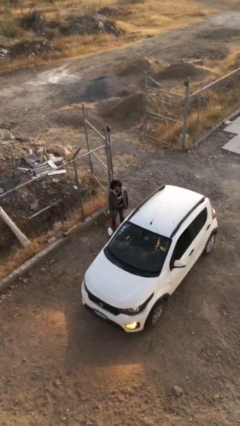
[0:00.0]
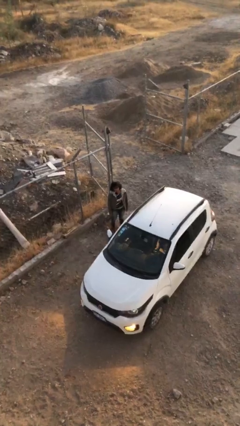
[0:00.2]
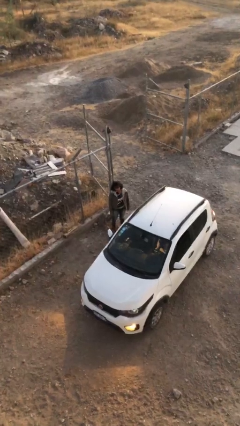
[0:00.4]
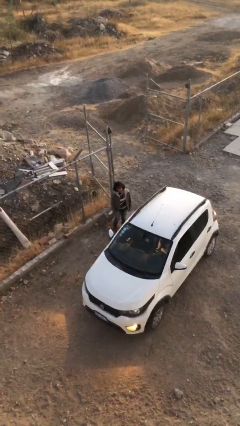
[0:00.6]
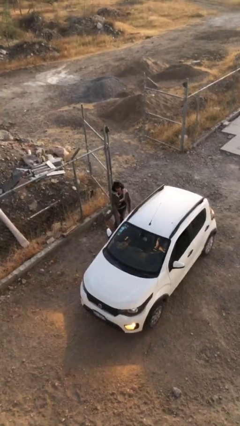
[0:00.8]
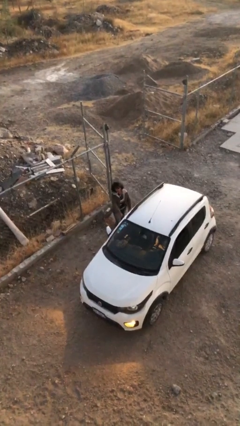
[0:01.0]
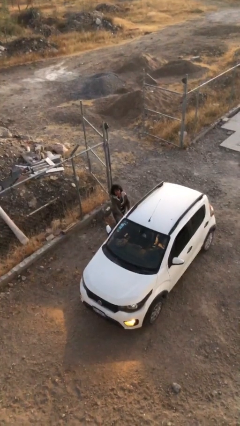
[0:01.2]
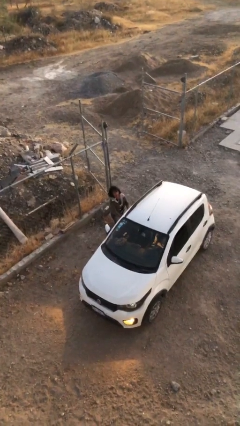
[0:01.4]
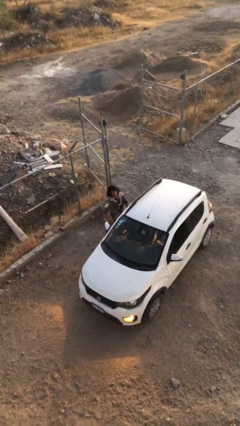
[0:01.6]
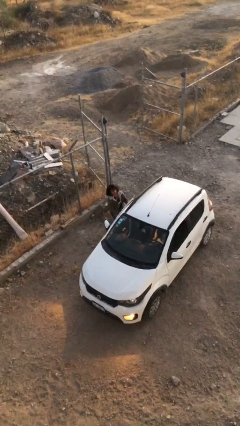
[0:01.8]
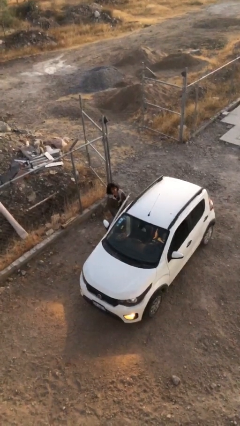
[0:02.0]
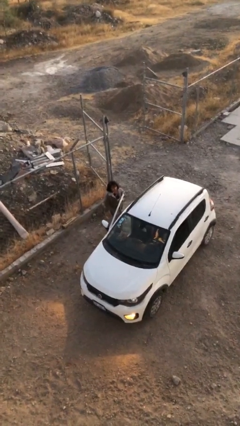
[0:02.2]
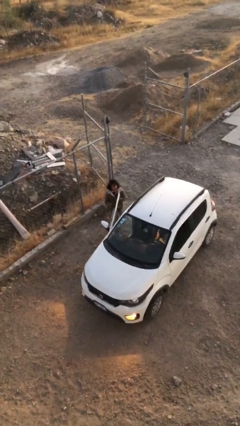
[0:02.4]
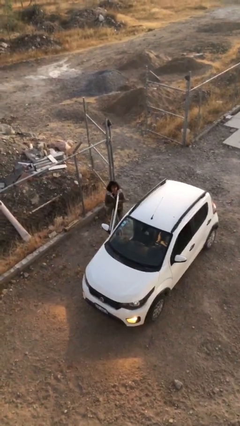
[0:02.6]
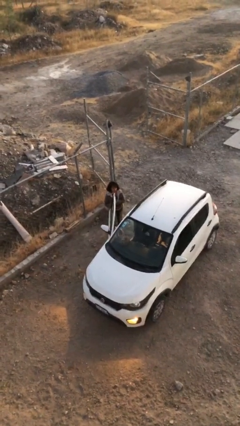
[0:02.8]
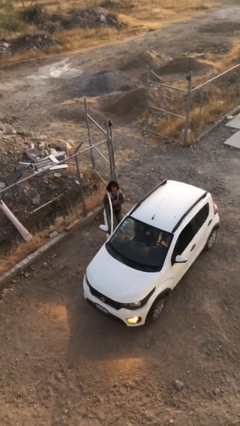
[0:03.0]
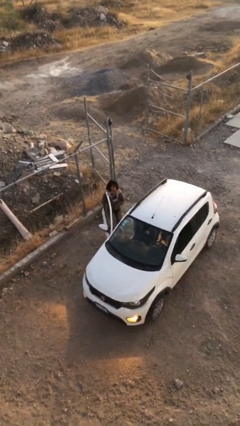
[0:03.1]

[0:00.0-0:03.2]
person opens car door

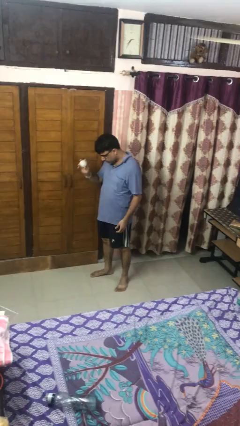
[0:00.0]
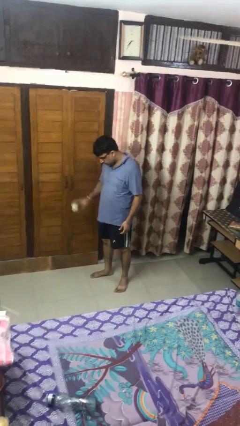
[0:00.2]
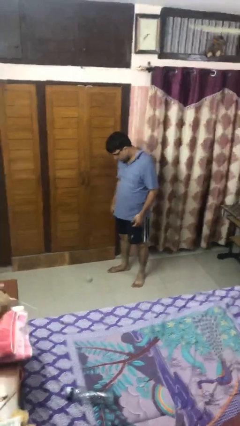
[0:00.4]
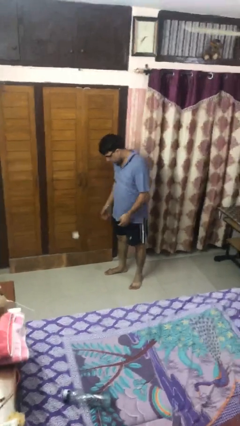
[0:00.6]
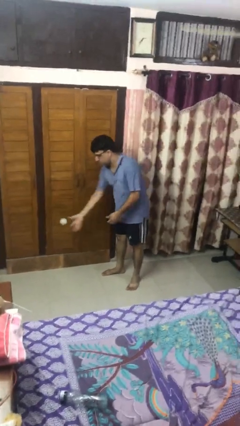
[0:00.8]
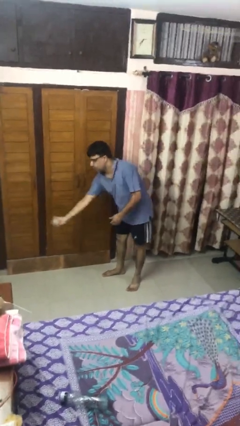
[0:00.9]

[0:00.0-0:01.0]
person bounces ball on floor

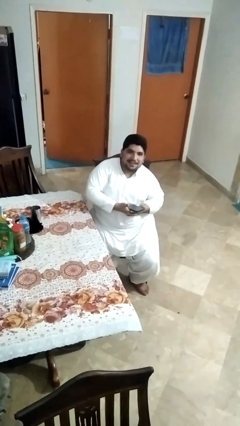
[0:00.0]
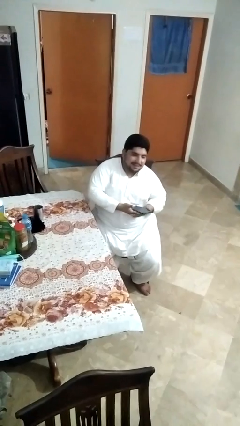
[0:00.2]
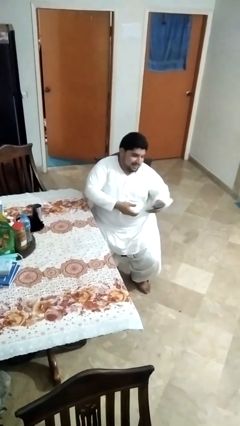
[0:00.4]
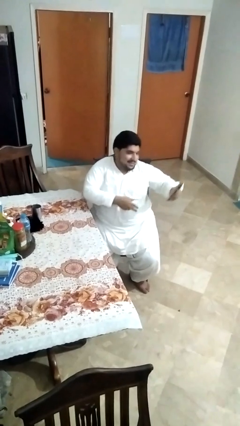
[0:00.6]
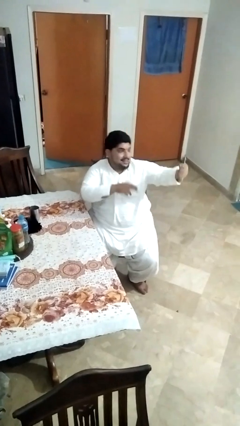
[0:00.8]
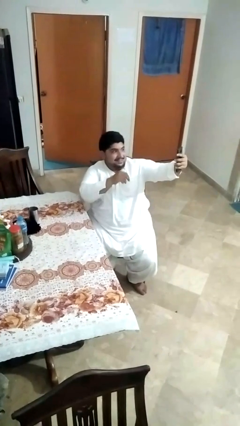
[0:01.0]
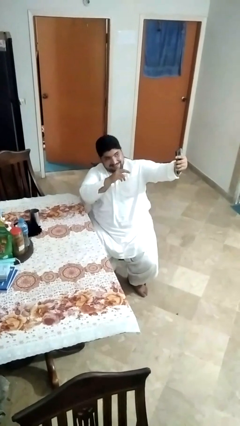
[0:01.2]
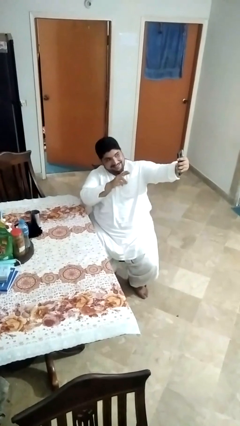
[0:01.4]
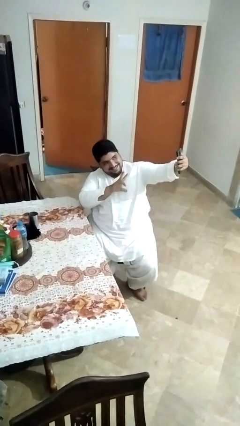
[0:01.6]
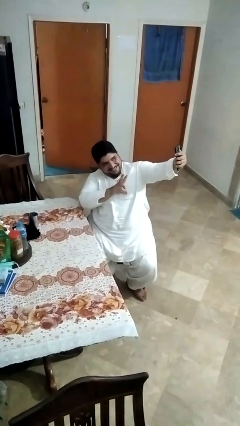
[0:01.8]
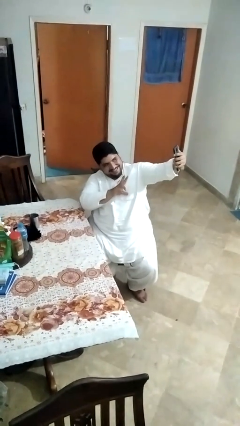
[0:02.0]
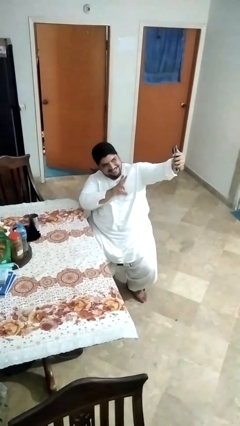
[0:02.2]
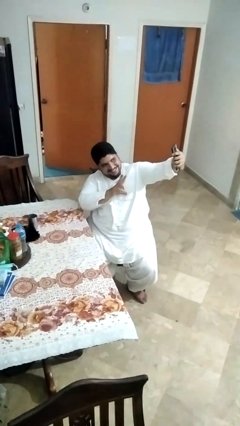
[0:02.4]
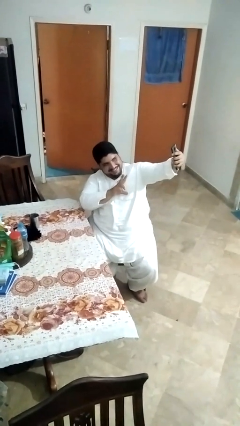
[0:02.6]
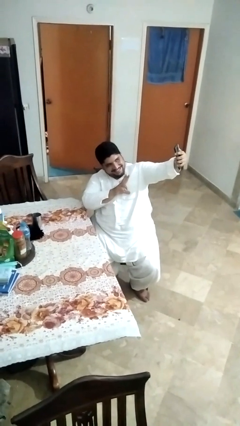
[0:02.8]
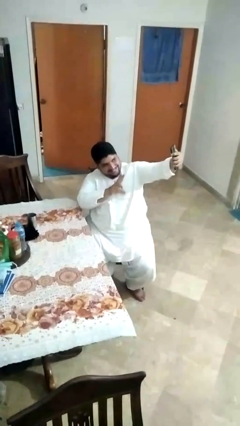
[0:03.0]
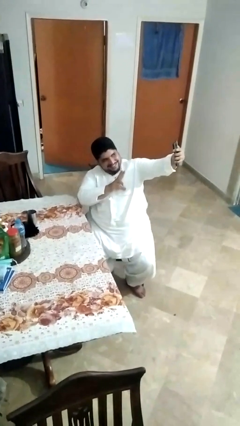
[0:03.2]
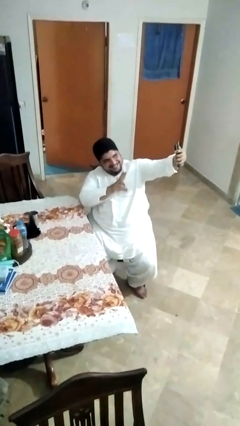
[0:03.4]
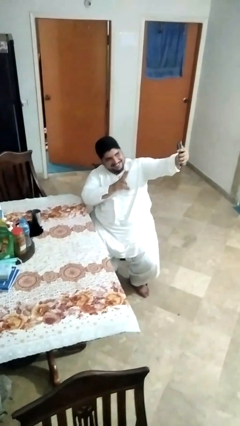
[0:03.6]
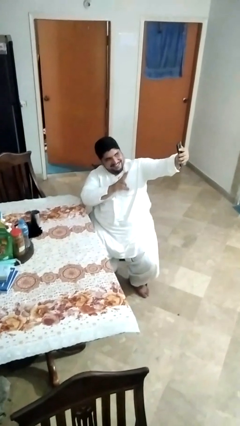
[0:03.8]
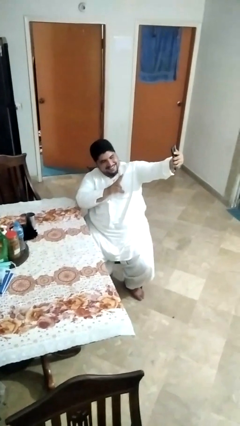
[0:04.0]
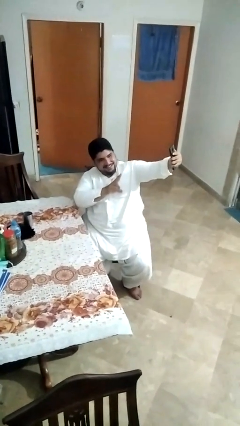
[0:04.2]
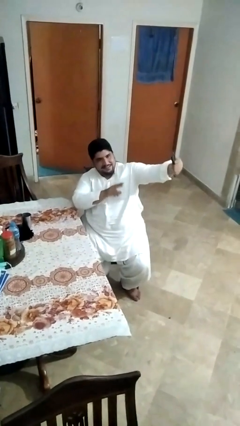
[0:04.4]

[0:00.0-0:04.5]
person takes selfie

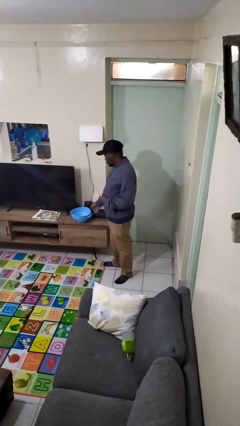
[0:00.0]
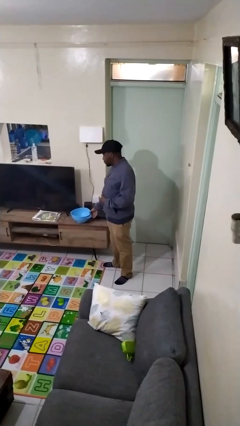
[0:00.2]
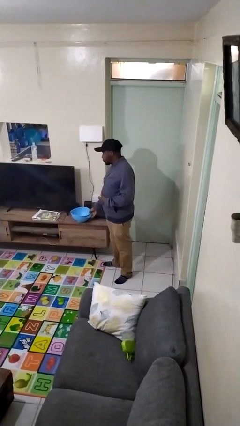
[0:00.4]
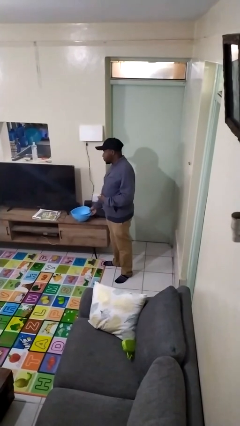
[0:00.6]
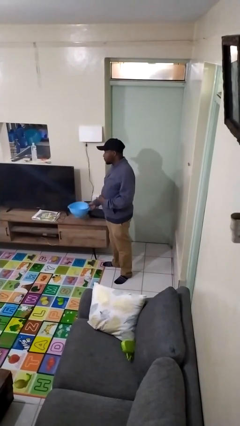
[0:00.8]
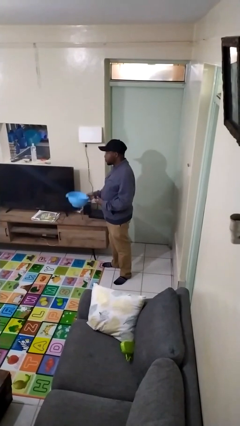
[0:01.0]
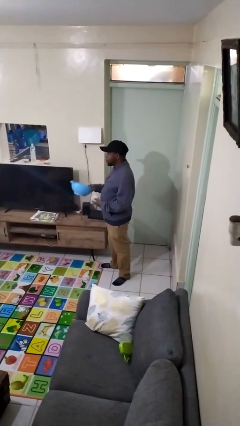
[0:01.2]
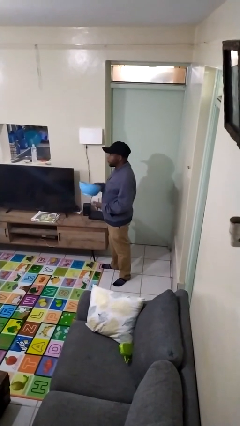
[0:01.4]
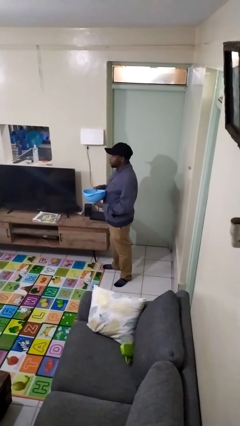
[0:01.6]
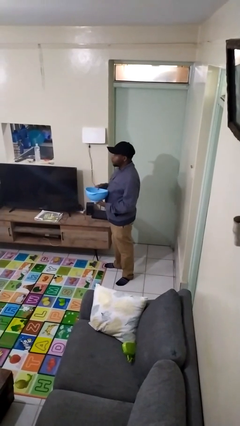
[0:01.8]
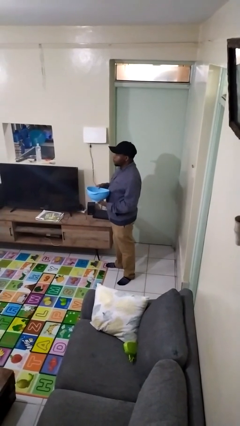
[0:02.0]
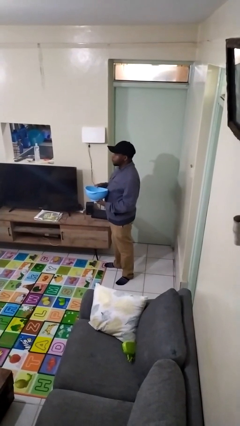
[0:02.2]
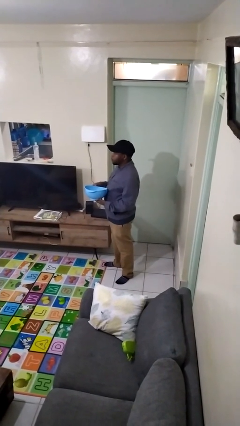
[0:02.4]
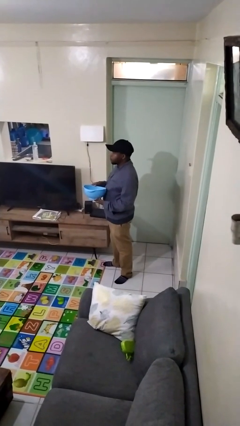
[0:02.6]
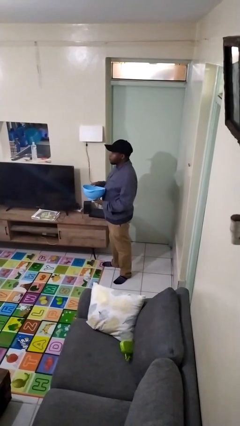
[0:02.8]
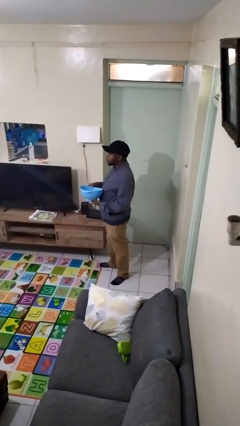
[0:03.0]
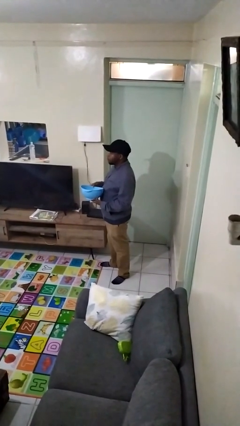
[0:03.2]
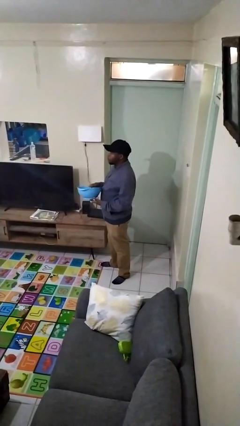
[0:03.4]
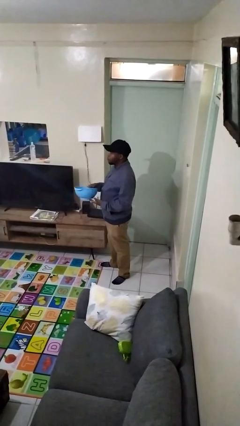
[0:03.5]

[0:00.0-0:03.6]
person picks up object from countertop

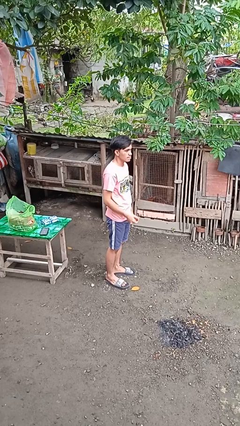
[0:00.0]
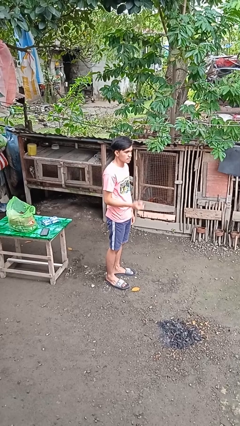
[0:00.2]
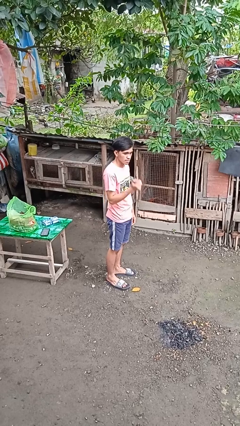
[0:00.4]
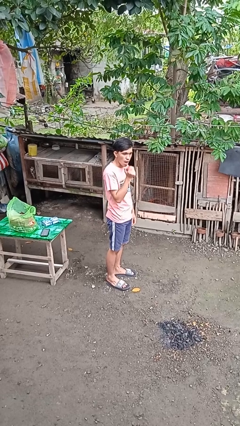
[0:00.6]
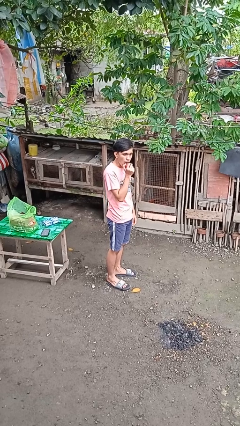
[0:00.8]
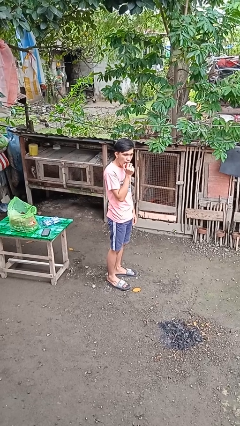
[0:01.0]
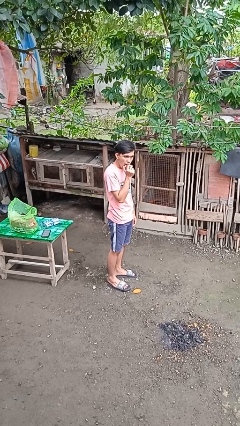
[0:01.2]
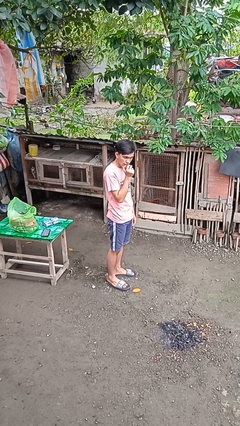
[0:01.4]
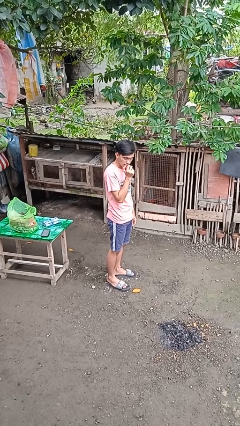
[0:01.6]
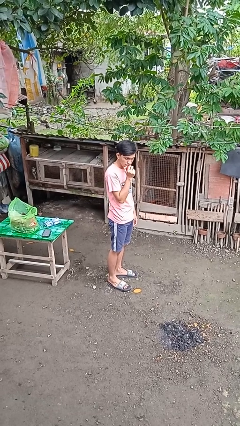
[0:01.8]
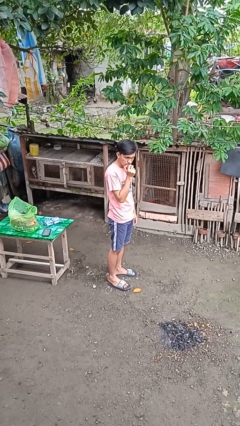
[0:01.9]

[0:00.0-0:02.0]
person eats apple

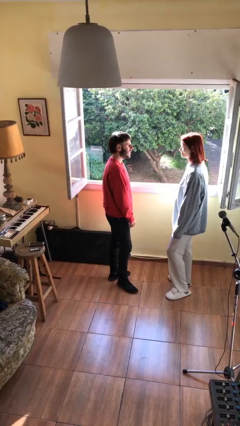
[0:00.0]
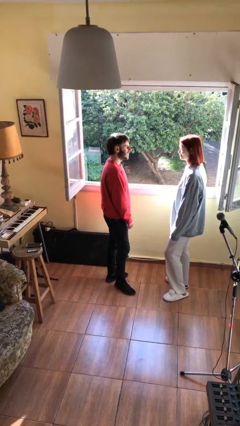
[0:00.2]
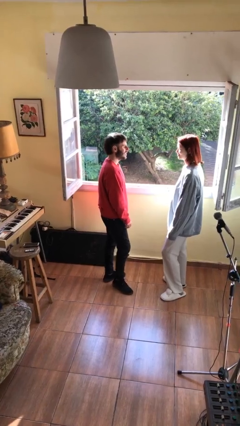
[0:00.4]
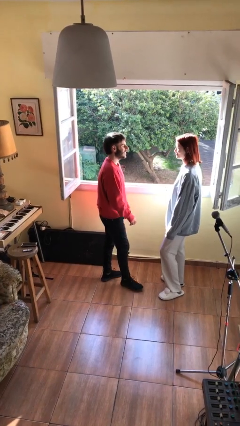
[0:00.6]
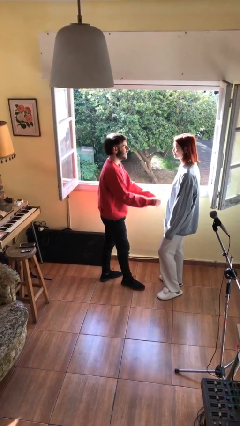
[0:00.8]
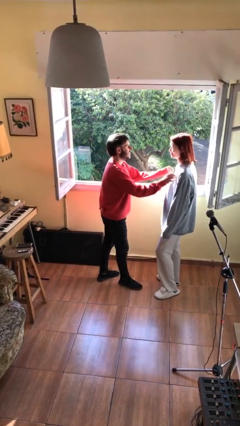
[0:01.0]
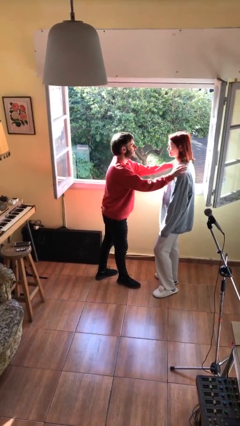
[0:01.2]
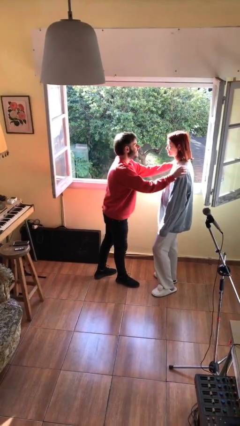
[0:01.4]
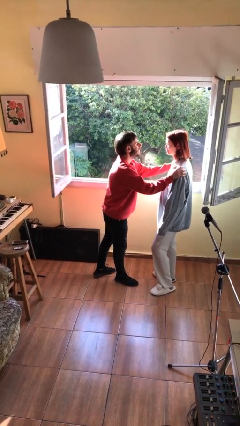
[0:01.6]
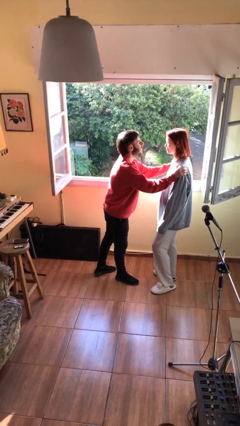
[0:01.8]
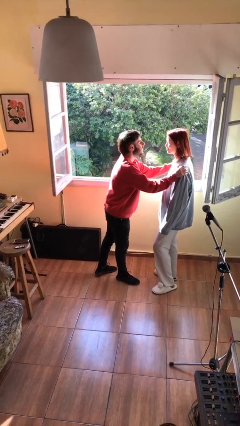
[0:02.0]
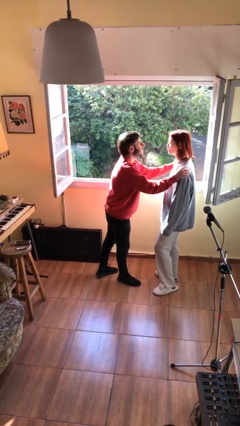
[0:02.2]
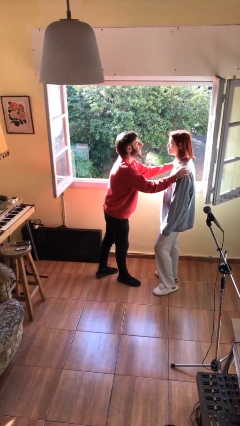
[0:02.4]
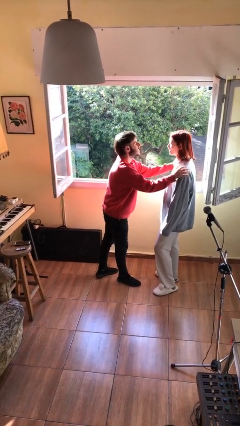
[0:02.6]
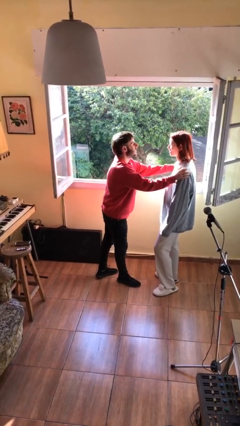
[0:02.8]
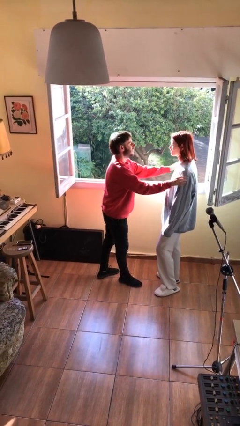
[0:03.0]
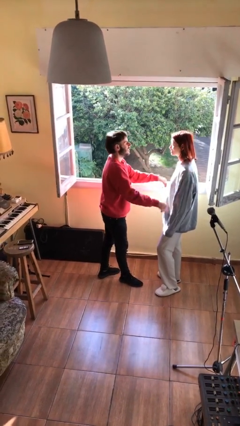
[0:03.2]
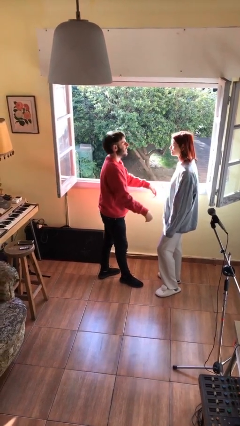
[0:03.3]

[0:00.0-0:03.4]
person pounds shoulders of person
